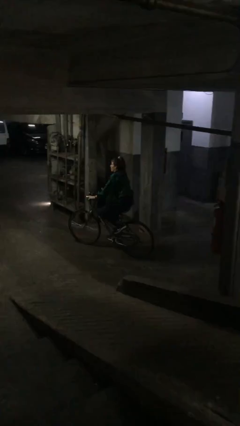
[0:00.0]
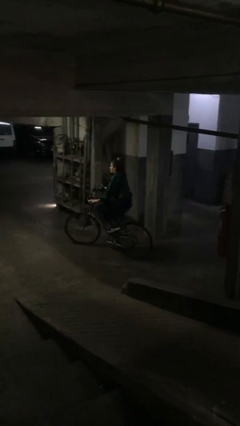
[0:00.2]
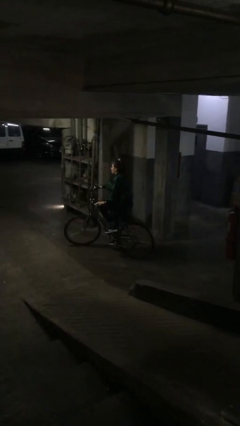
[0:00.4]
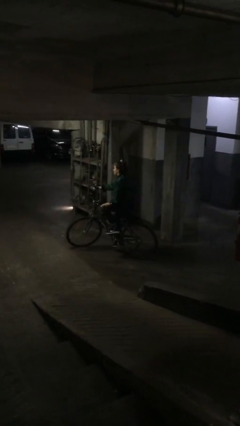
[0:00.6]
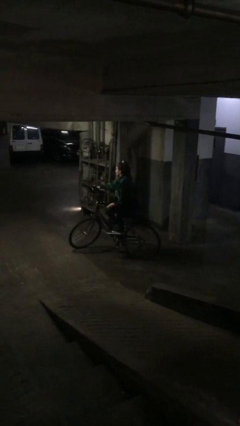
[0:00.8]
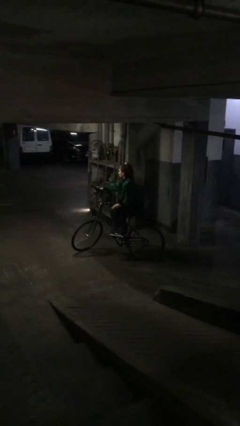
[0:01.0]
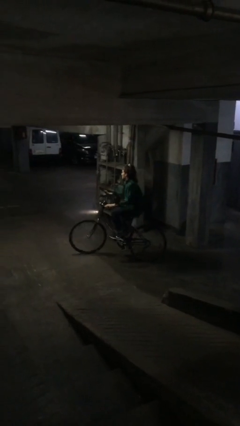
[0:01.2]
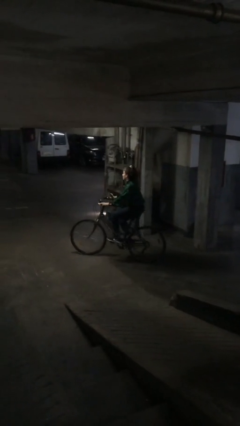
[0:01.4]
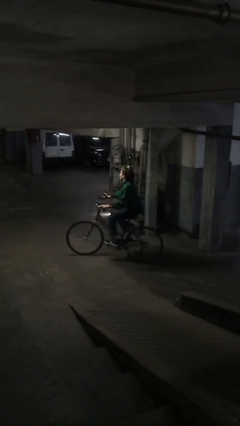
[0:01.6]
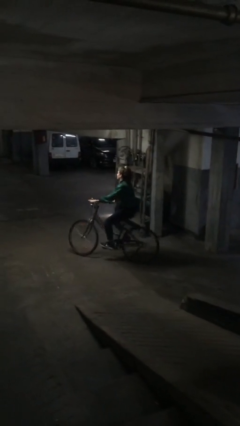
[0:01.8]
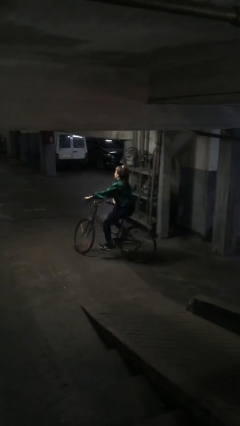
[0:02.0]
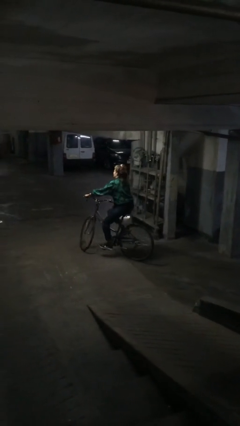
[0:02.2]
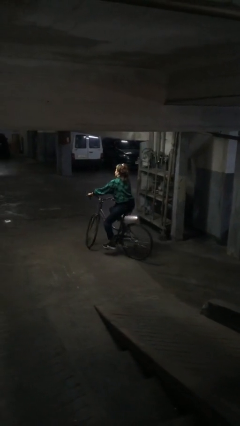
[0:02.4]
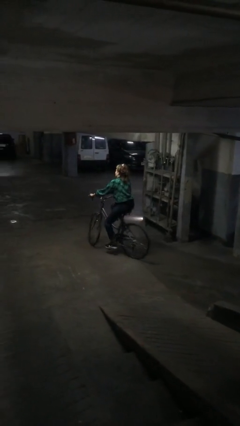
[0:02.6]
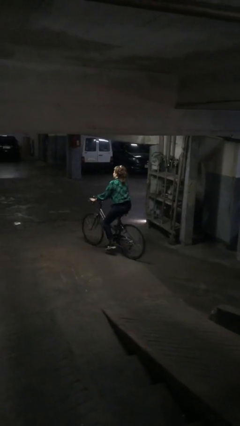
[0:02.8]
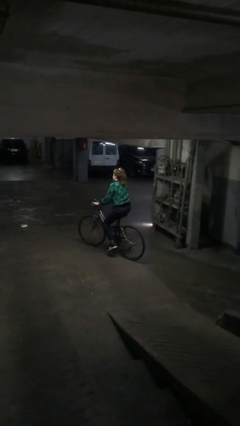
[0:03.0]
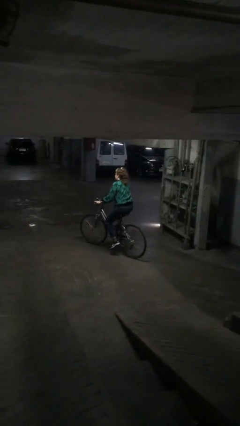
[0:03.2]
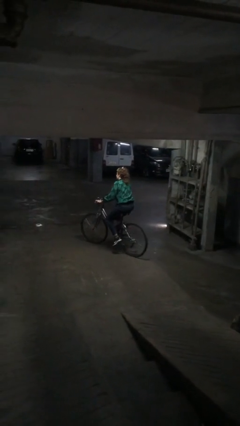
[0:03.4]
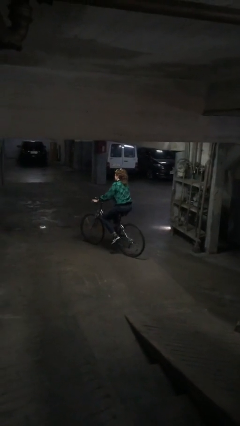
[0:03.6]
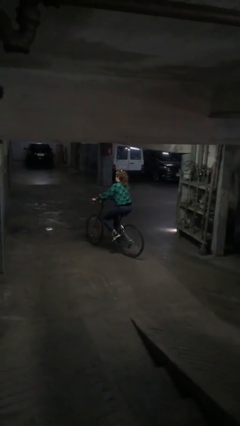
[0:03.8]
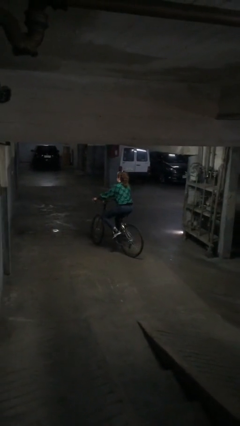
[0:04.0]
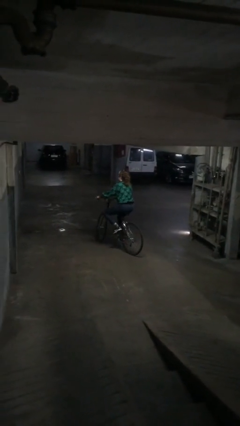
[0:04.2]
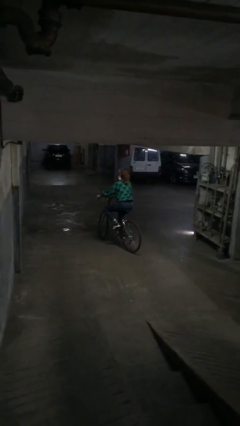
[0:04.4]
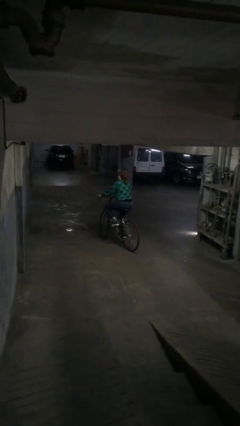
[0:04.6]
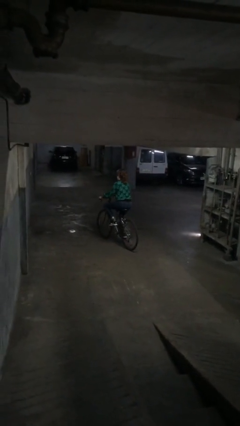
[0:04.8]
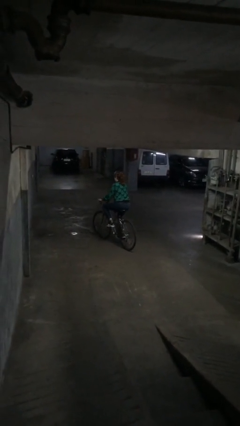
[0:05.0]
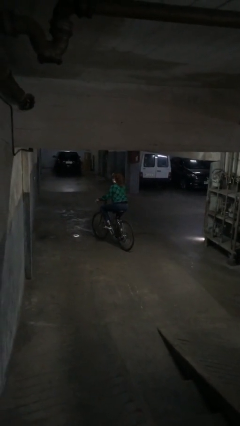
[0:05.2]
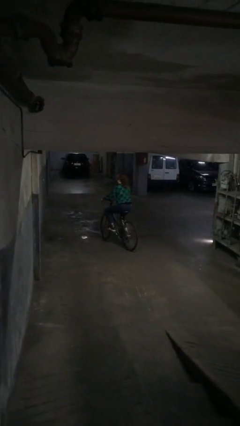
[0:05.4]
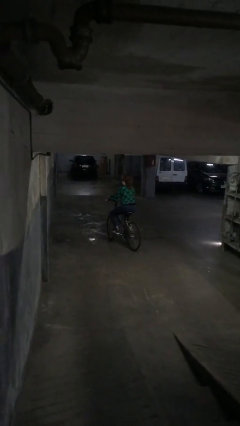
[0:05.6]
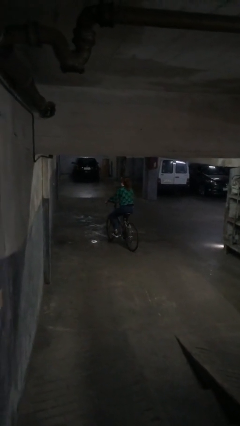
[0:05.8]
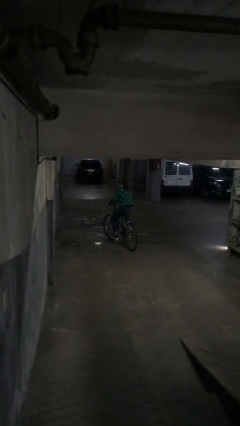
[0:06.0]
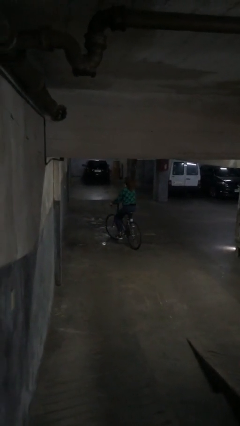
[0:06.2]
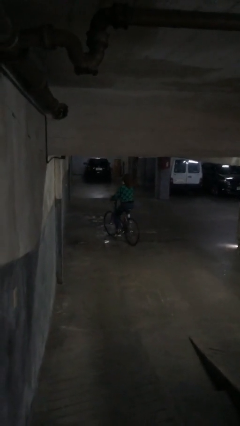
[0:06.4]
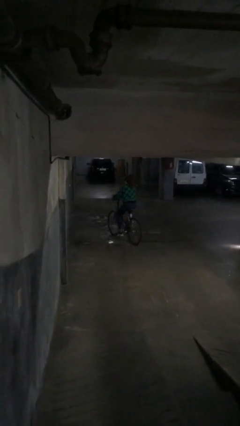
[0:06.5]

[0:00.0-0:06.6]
person rides bicycle

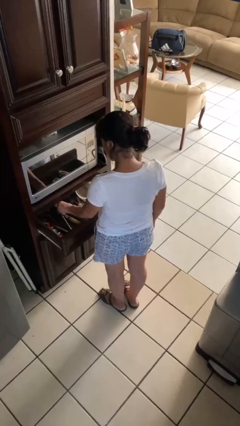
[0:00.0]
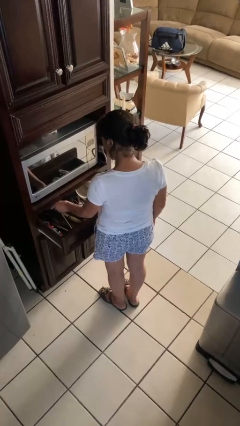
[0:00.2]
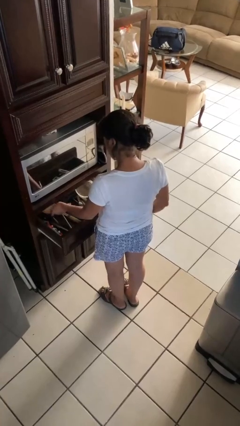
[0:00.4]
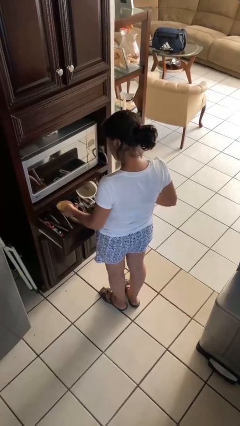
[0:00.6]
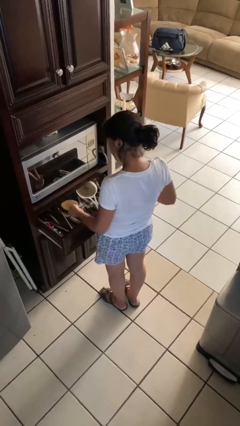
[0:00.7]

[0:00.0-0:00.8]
person takes object from kitchen drawer

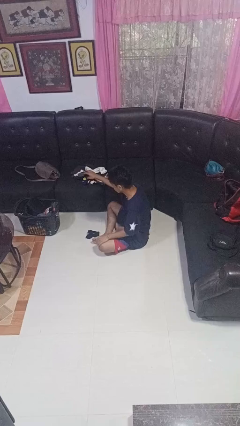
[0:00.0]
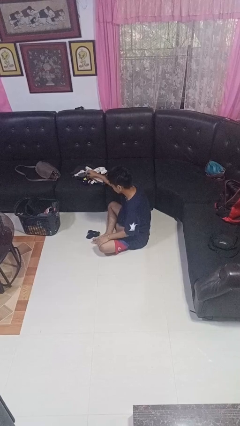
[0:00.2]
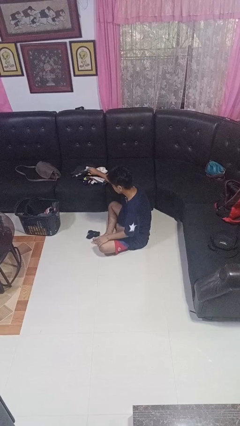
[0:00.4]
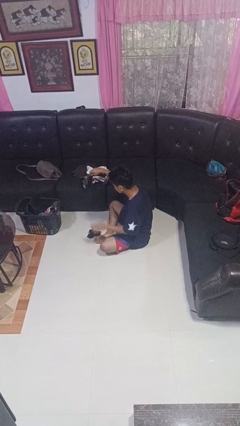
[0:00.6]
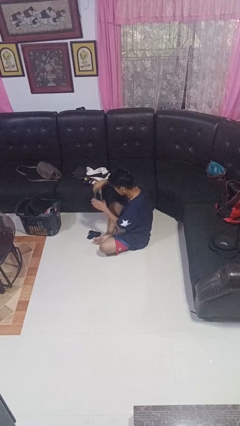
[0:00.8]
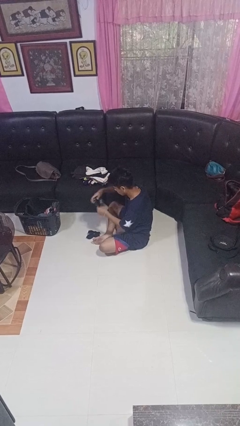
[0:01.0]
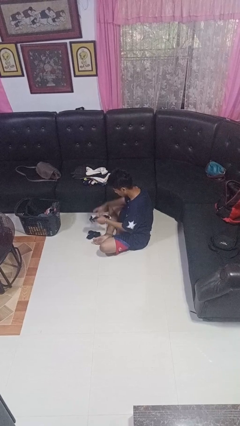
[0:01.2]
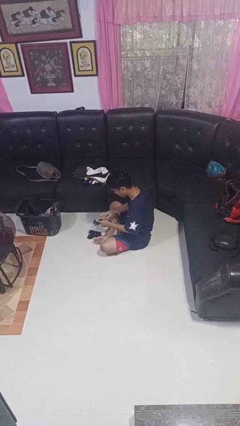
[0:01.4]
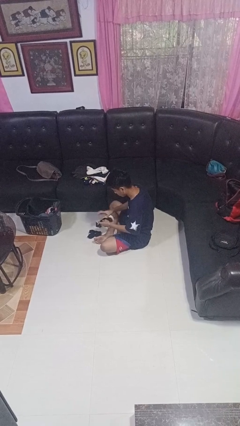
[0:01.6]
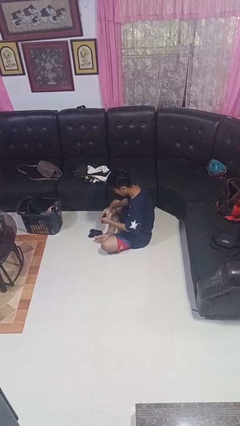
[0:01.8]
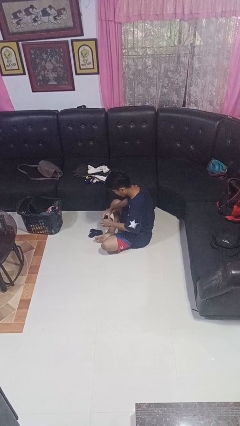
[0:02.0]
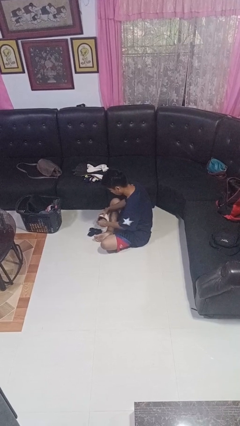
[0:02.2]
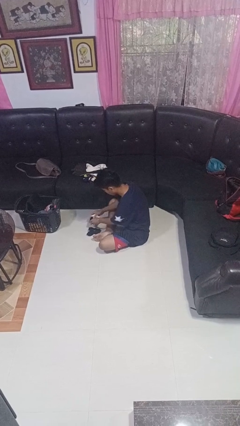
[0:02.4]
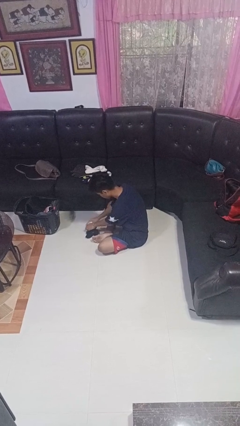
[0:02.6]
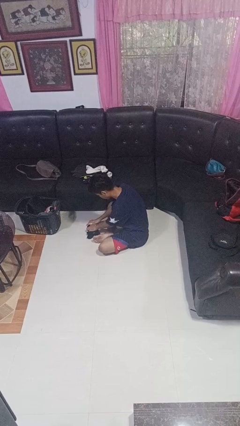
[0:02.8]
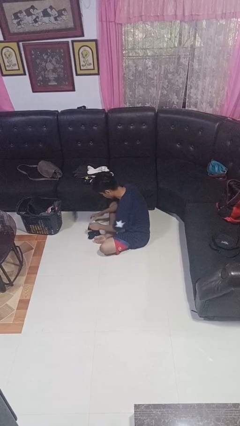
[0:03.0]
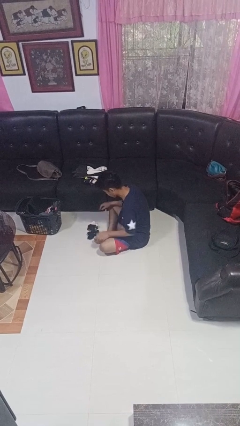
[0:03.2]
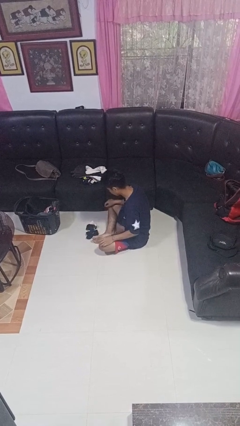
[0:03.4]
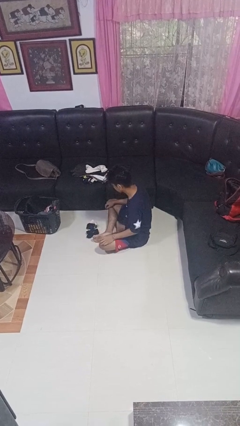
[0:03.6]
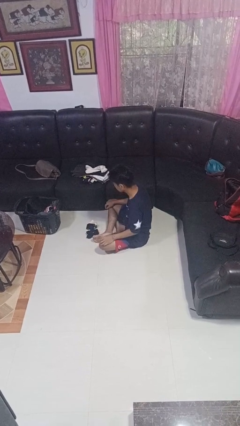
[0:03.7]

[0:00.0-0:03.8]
person folds socks

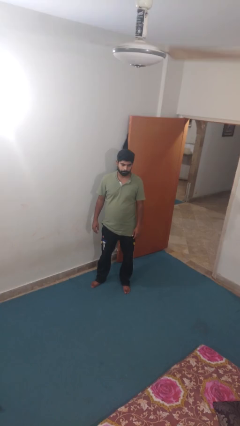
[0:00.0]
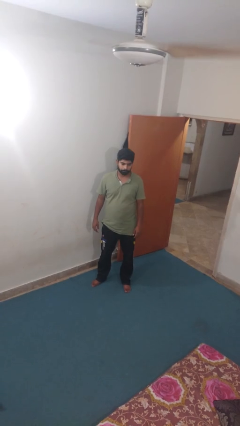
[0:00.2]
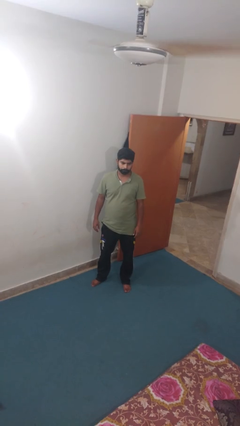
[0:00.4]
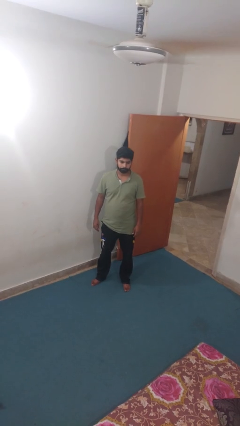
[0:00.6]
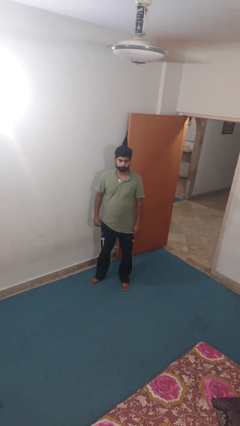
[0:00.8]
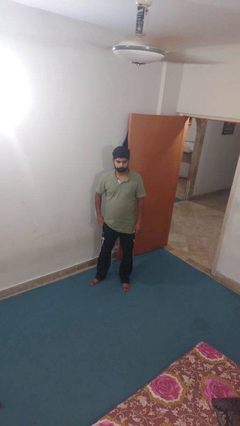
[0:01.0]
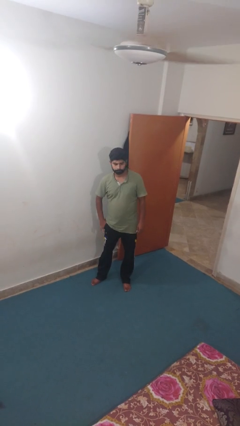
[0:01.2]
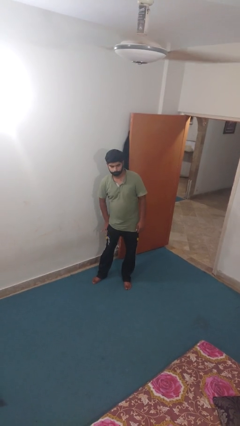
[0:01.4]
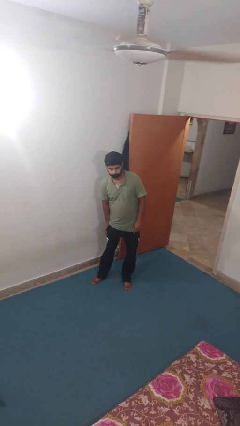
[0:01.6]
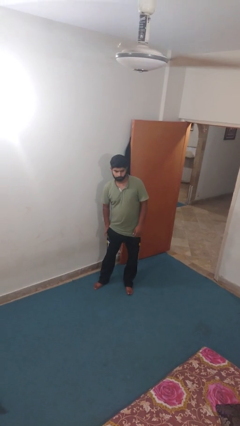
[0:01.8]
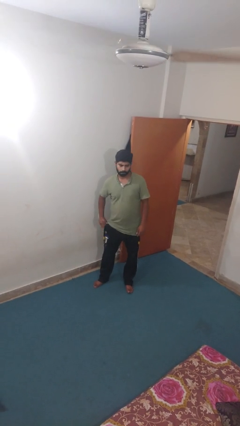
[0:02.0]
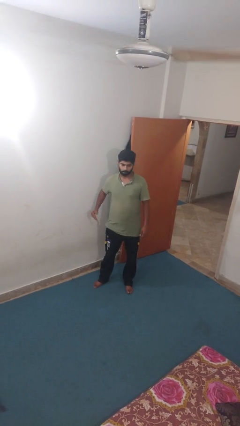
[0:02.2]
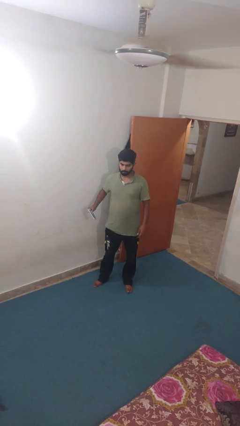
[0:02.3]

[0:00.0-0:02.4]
person takes phone from pocket

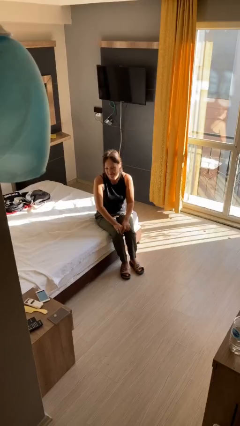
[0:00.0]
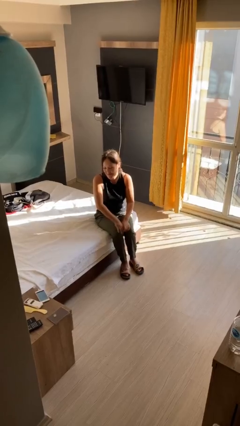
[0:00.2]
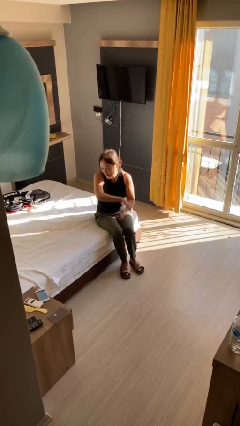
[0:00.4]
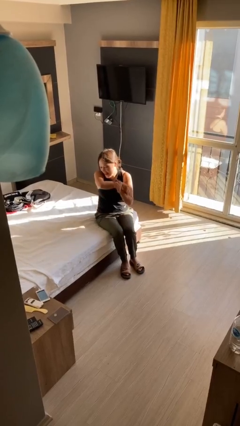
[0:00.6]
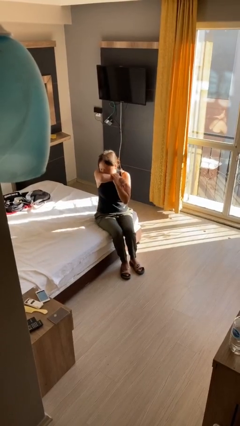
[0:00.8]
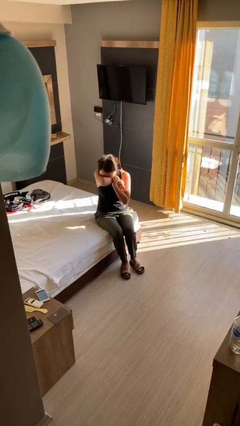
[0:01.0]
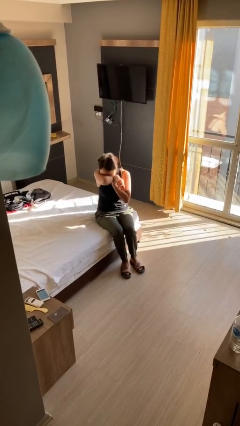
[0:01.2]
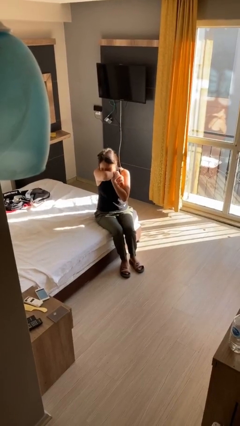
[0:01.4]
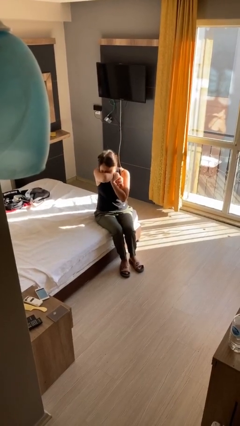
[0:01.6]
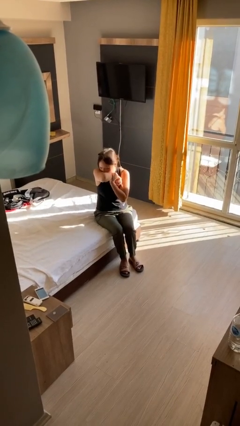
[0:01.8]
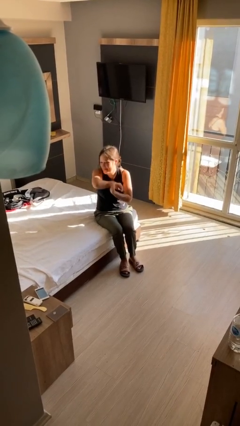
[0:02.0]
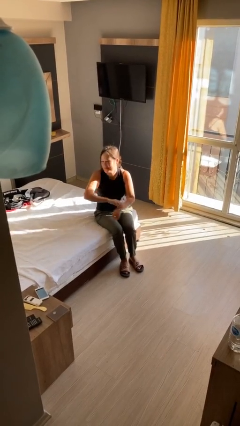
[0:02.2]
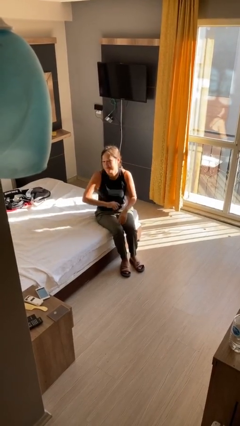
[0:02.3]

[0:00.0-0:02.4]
person sneezes into hand

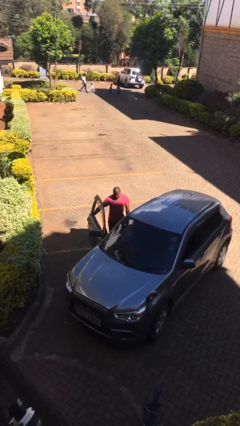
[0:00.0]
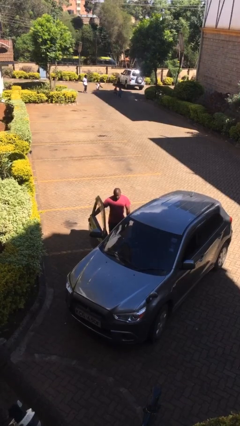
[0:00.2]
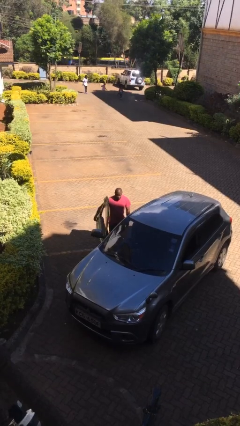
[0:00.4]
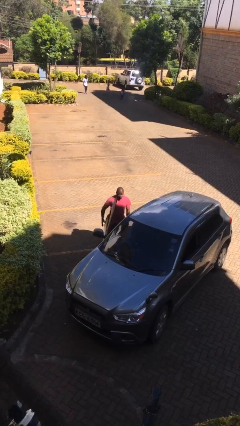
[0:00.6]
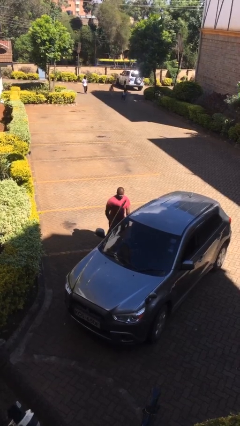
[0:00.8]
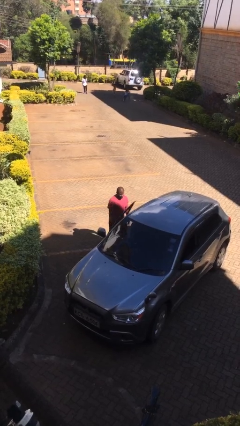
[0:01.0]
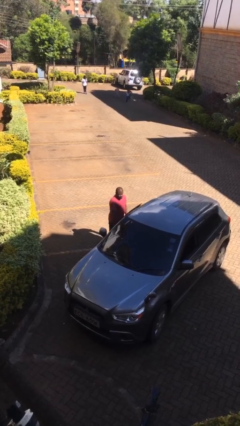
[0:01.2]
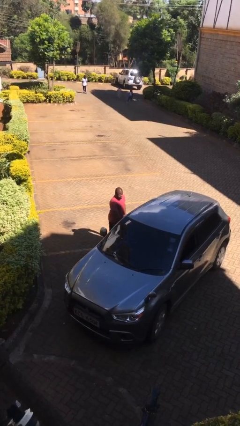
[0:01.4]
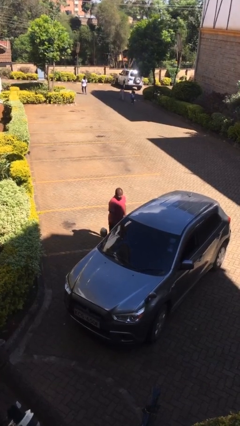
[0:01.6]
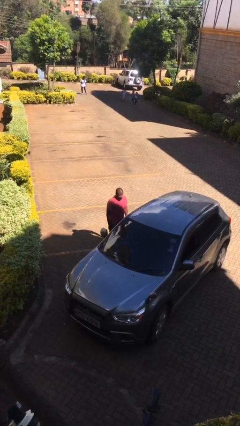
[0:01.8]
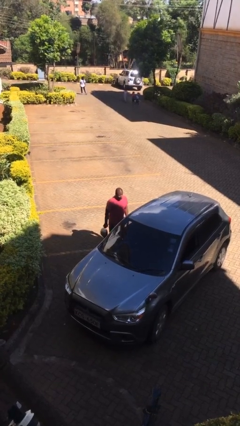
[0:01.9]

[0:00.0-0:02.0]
person closes car door
